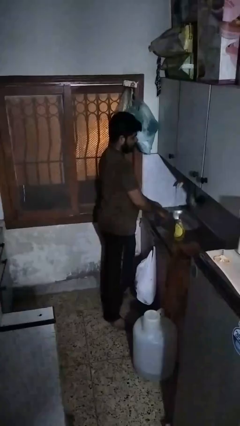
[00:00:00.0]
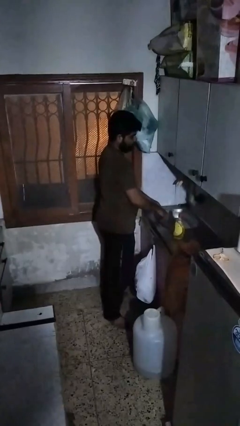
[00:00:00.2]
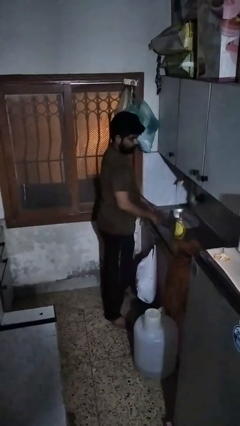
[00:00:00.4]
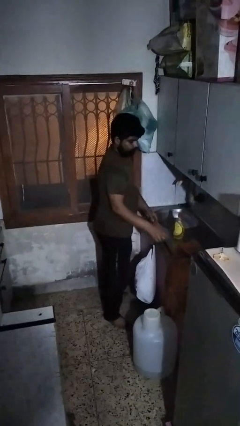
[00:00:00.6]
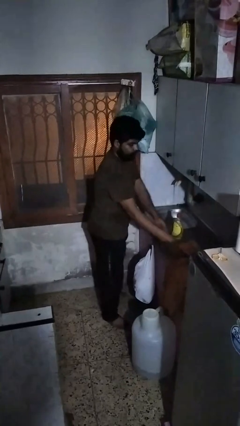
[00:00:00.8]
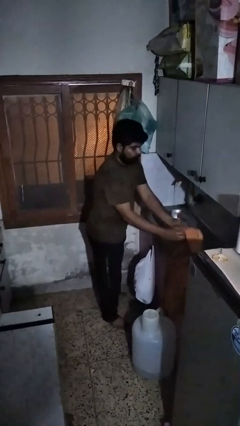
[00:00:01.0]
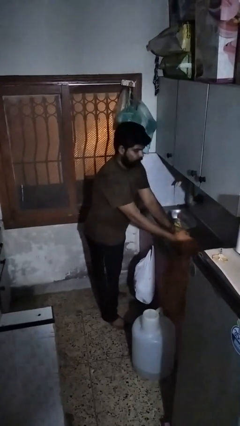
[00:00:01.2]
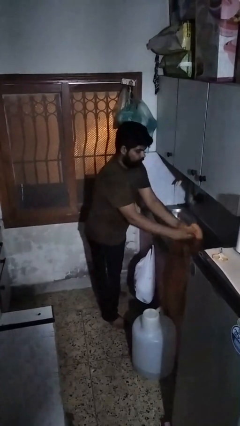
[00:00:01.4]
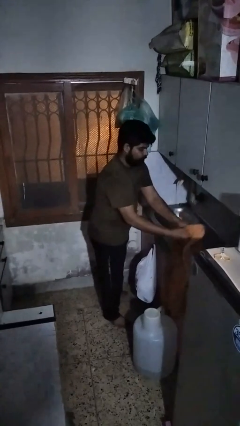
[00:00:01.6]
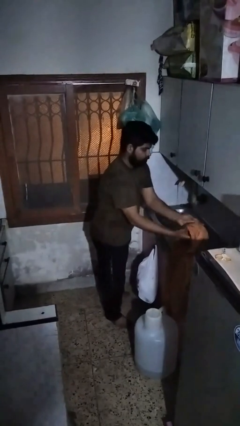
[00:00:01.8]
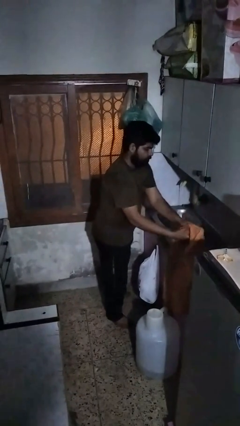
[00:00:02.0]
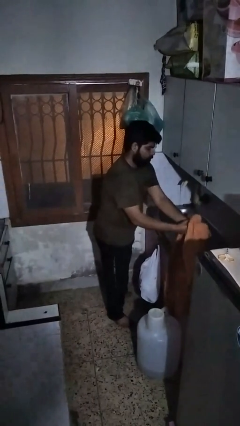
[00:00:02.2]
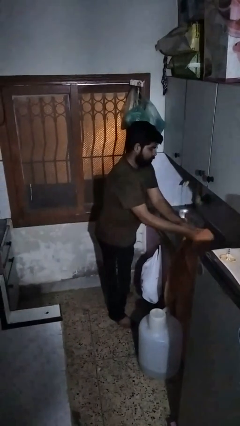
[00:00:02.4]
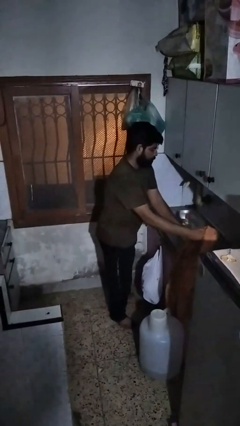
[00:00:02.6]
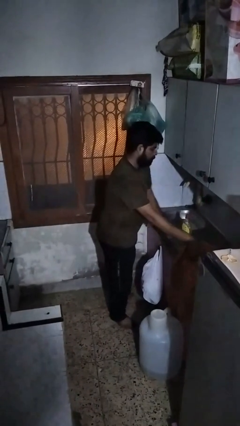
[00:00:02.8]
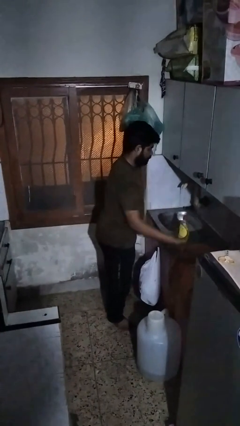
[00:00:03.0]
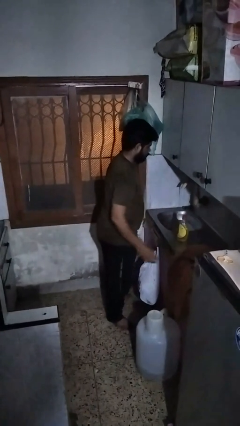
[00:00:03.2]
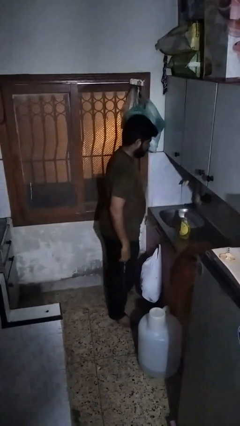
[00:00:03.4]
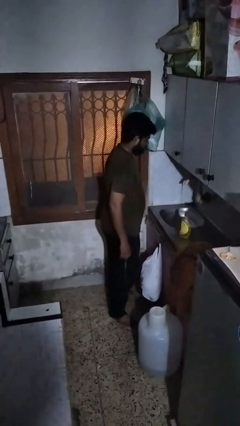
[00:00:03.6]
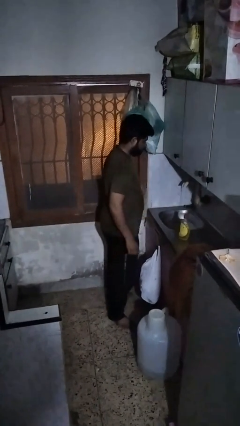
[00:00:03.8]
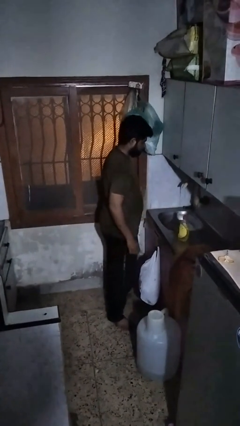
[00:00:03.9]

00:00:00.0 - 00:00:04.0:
person dries hands with towel

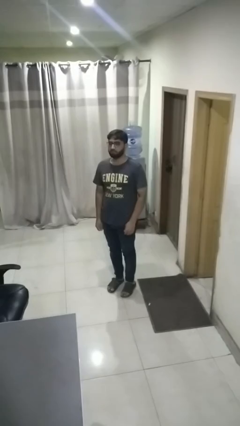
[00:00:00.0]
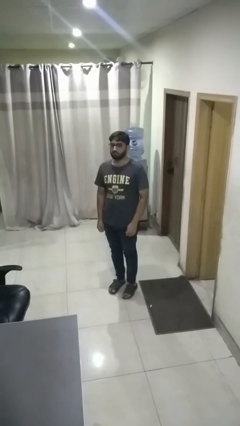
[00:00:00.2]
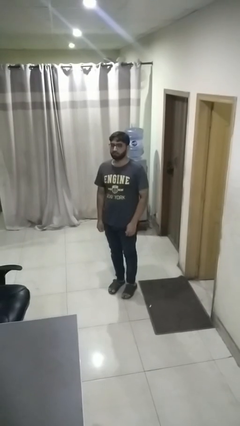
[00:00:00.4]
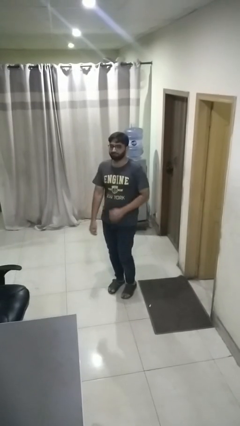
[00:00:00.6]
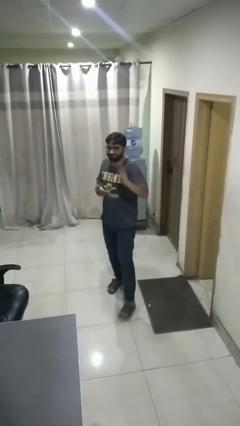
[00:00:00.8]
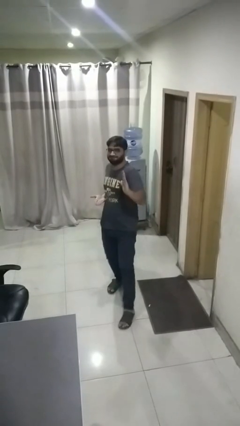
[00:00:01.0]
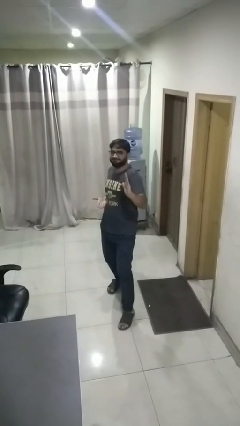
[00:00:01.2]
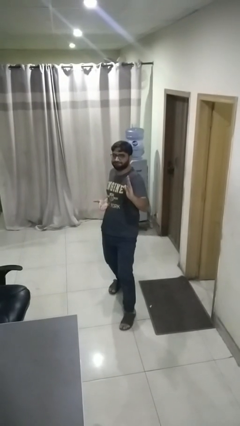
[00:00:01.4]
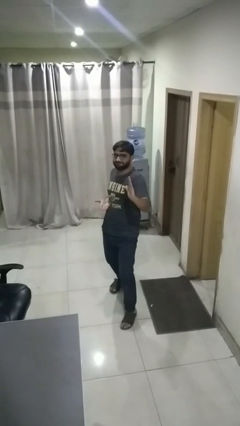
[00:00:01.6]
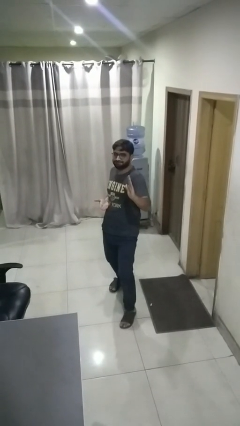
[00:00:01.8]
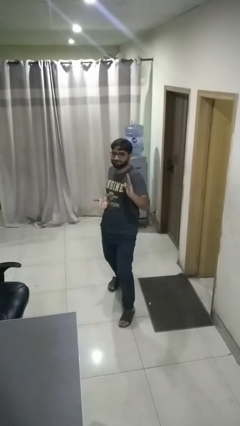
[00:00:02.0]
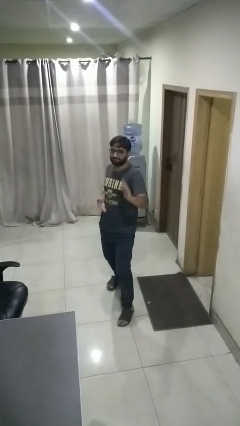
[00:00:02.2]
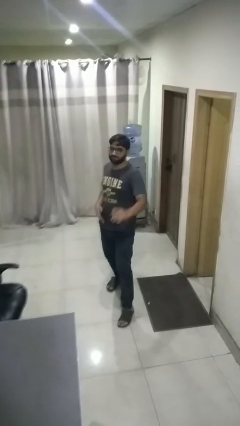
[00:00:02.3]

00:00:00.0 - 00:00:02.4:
person karate chop

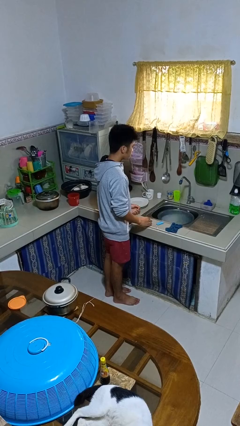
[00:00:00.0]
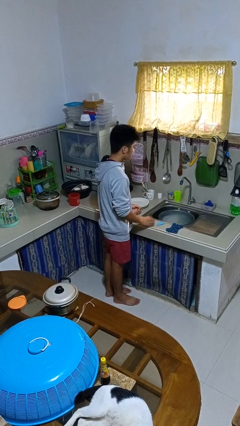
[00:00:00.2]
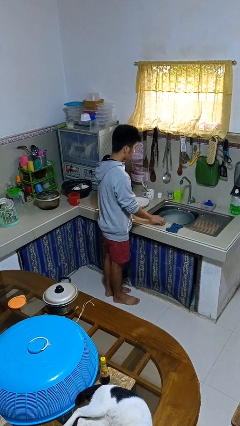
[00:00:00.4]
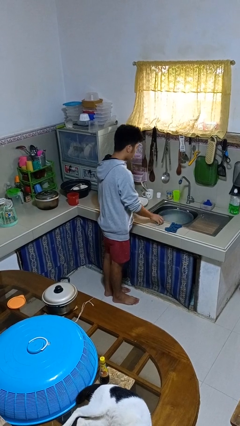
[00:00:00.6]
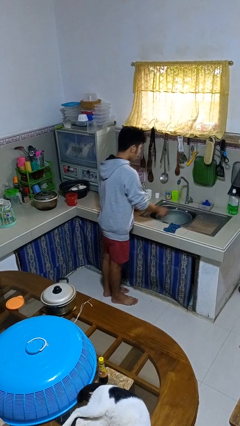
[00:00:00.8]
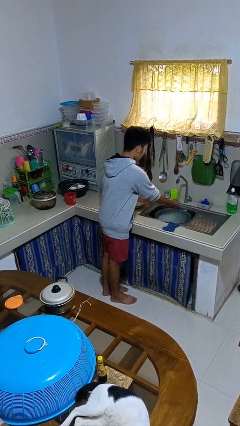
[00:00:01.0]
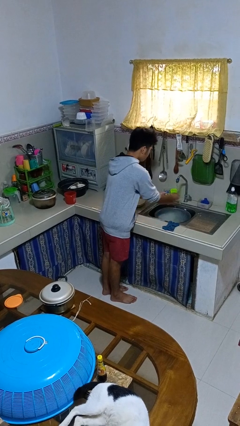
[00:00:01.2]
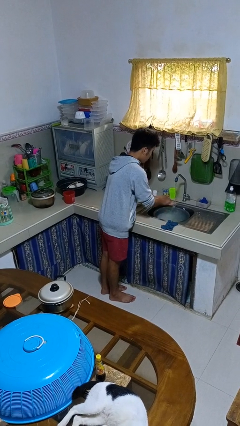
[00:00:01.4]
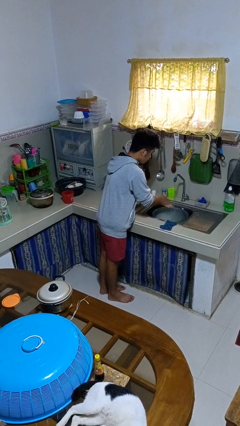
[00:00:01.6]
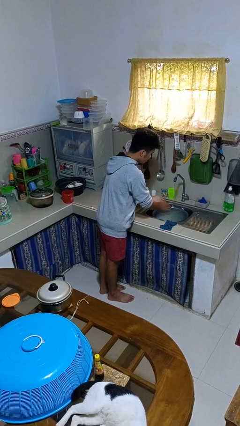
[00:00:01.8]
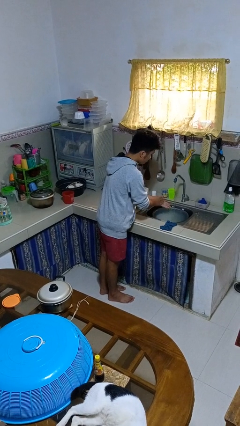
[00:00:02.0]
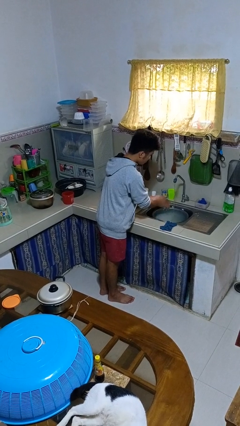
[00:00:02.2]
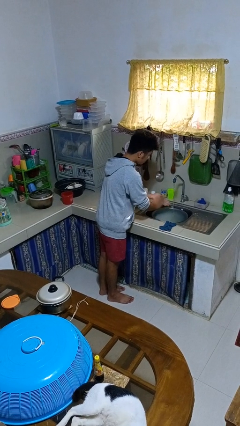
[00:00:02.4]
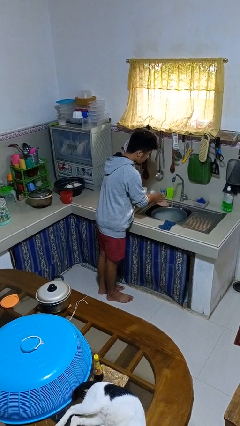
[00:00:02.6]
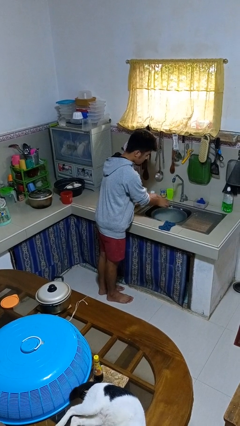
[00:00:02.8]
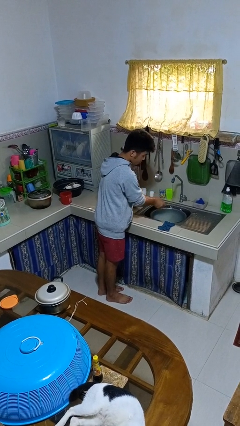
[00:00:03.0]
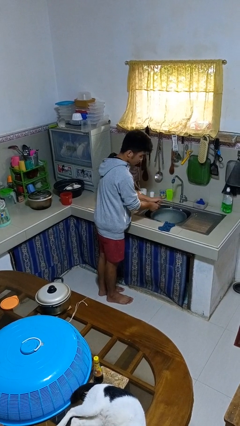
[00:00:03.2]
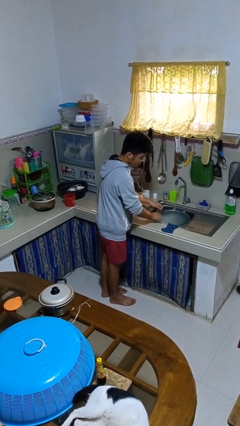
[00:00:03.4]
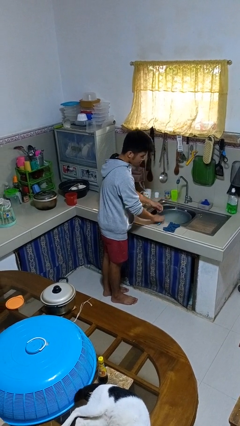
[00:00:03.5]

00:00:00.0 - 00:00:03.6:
person washes hands

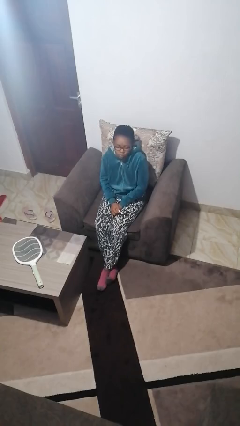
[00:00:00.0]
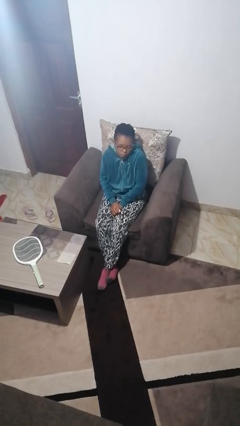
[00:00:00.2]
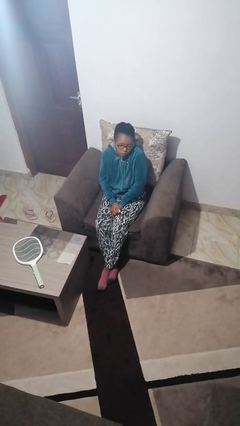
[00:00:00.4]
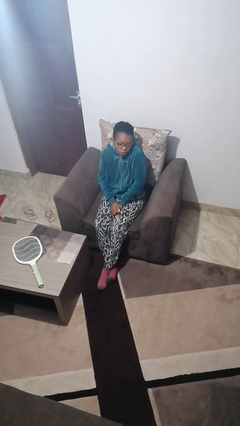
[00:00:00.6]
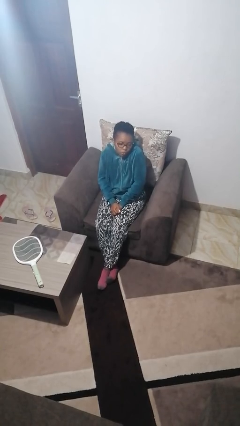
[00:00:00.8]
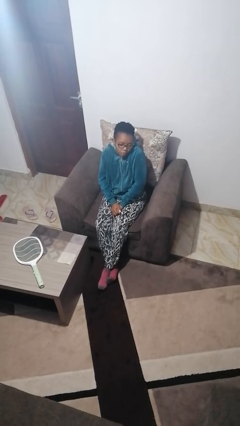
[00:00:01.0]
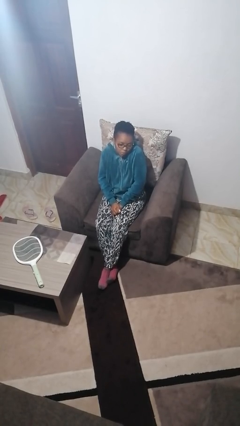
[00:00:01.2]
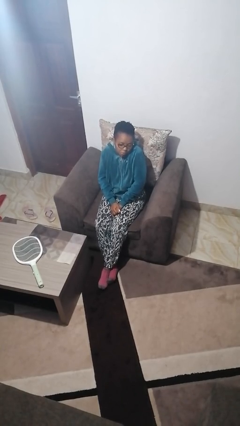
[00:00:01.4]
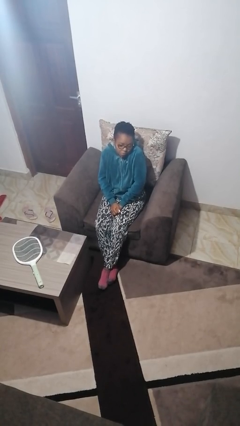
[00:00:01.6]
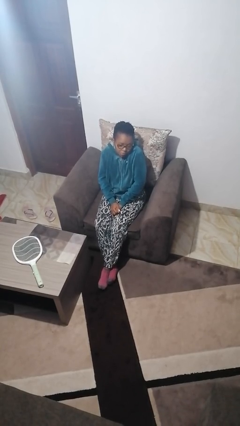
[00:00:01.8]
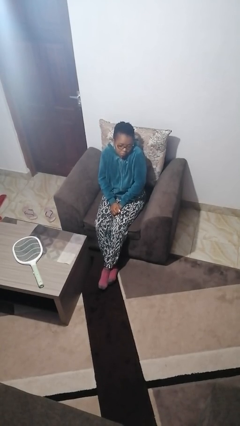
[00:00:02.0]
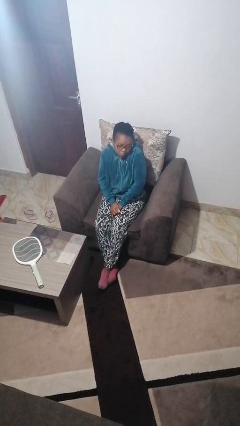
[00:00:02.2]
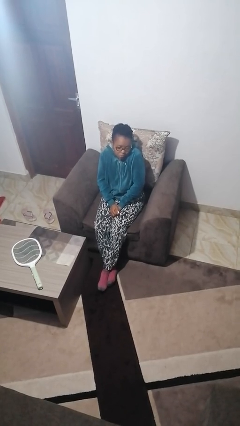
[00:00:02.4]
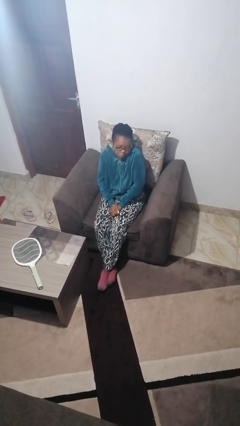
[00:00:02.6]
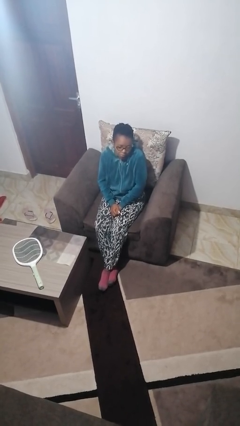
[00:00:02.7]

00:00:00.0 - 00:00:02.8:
person shrugs

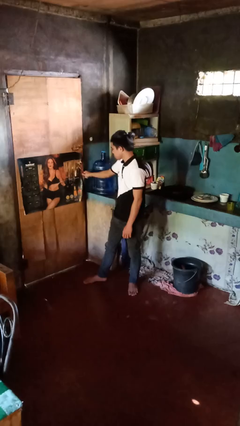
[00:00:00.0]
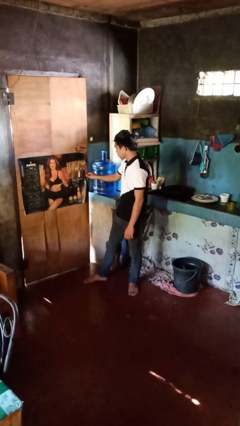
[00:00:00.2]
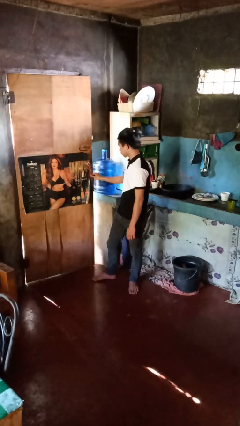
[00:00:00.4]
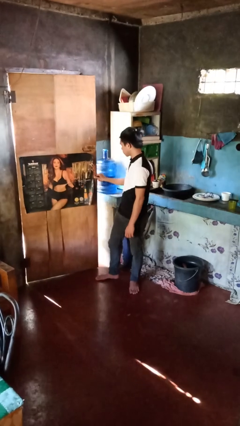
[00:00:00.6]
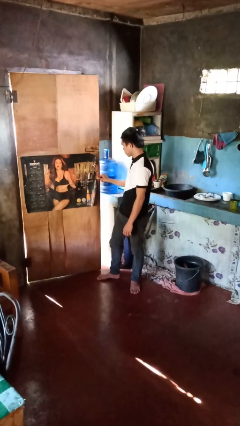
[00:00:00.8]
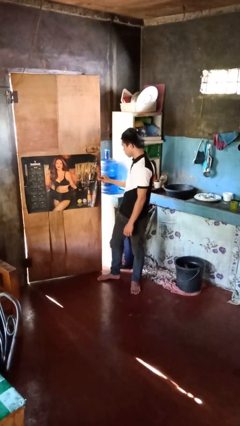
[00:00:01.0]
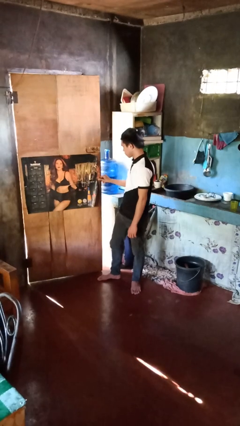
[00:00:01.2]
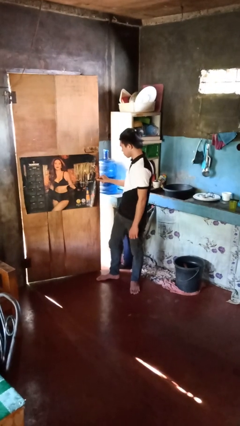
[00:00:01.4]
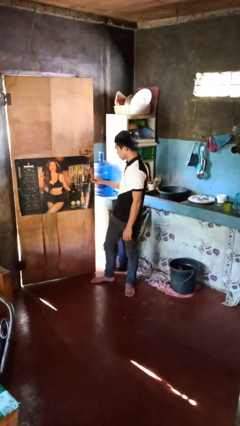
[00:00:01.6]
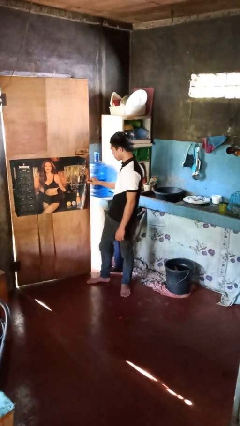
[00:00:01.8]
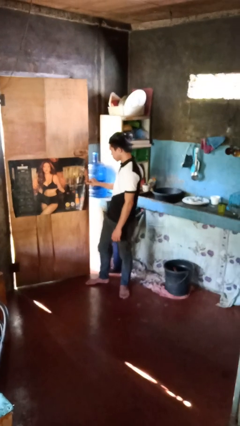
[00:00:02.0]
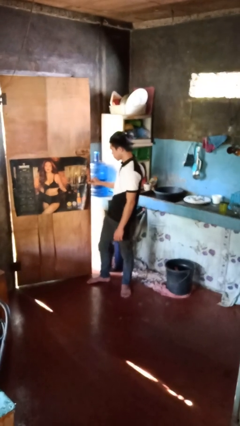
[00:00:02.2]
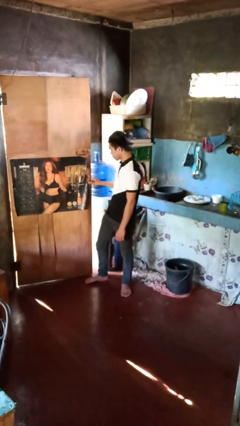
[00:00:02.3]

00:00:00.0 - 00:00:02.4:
person opens facility door

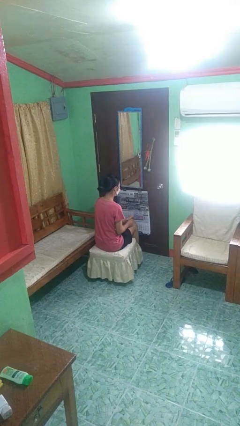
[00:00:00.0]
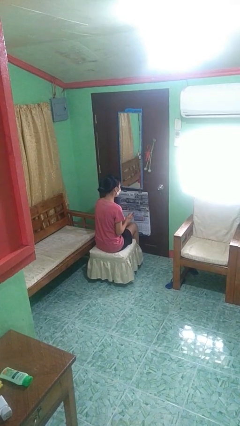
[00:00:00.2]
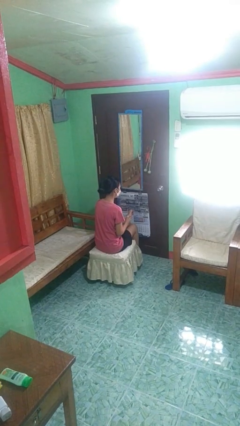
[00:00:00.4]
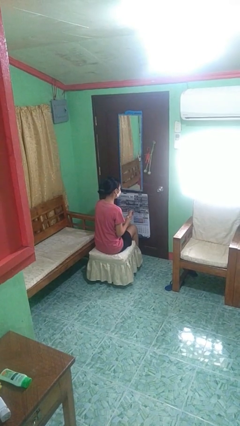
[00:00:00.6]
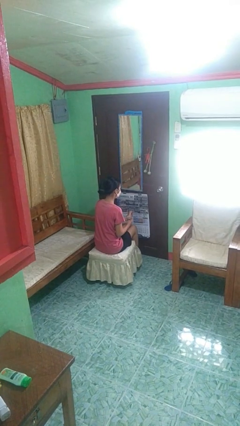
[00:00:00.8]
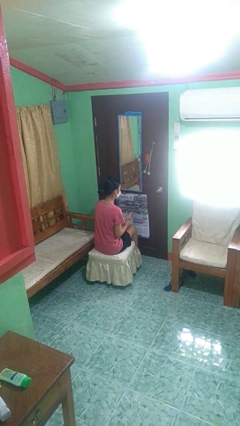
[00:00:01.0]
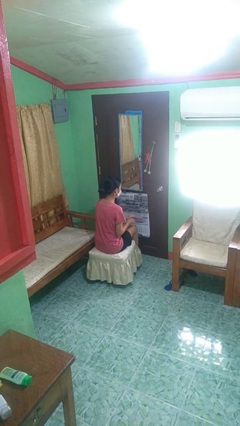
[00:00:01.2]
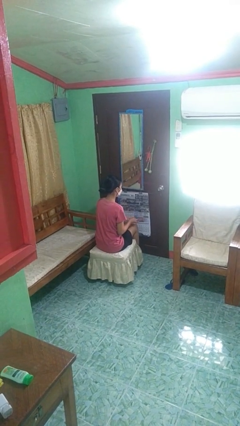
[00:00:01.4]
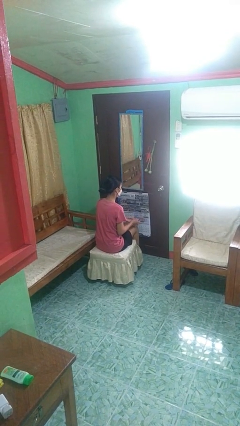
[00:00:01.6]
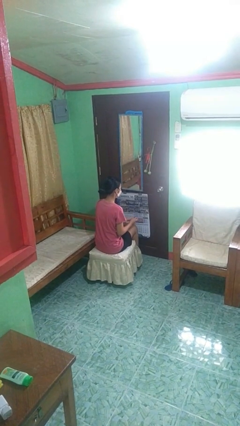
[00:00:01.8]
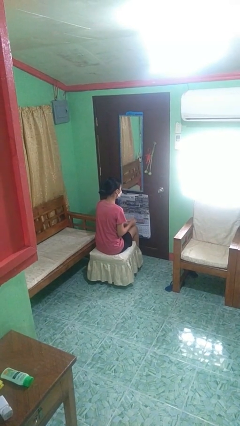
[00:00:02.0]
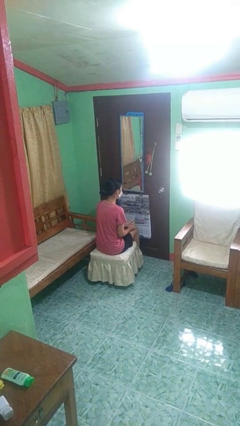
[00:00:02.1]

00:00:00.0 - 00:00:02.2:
person takes off wristwatch
